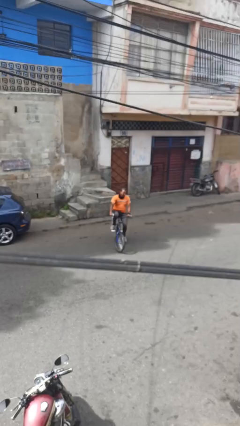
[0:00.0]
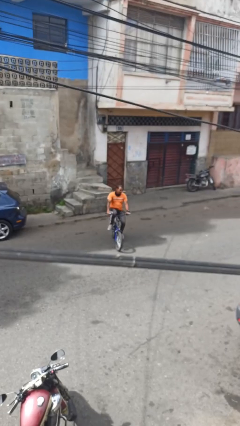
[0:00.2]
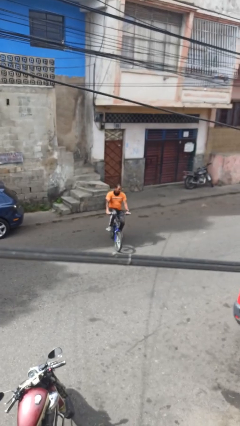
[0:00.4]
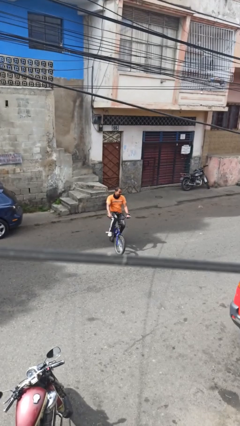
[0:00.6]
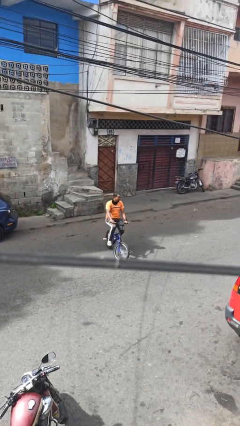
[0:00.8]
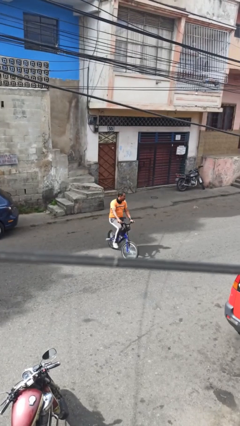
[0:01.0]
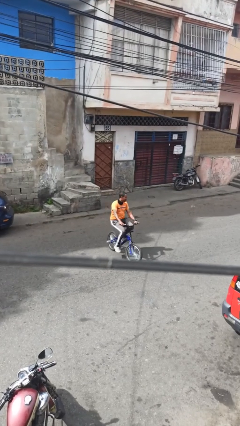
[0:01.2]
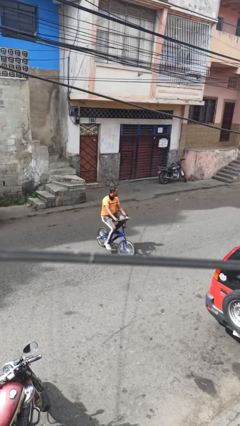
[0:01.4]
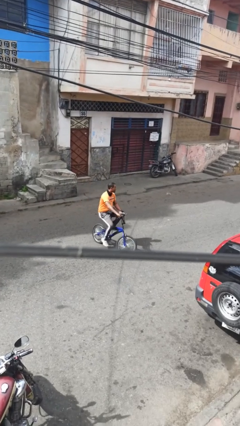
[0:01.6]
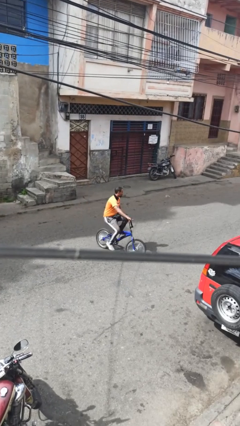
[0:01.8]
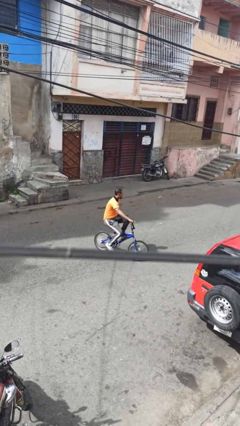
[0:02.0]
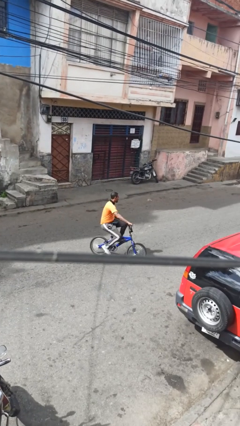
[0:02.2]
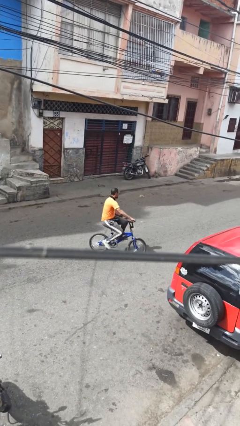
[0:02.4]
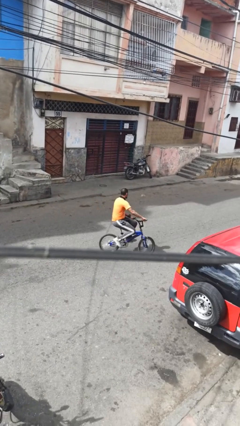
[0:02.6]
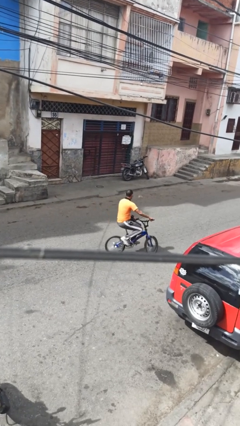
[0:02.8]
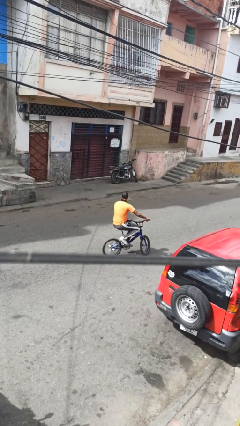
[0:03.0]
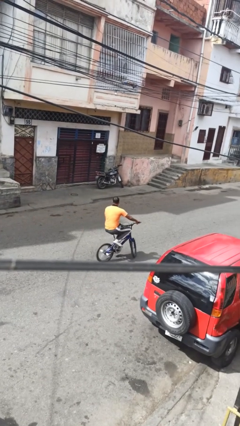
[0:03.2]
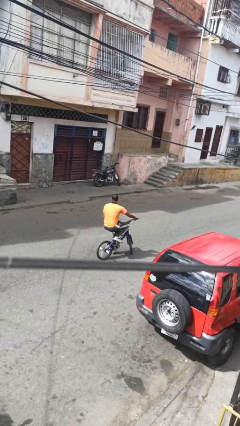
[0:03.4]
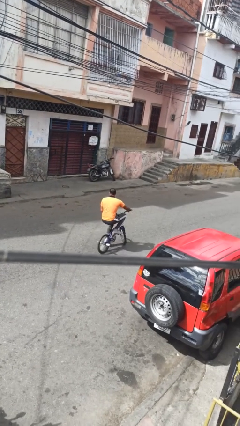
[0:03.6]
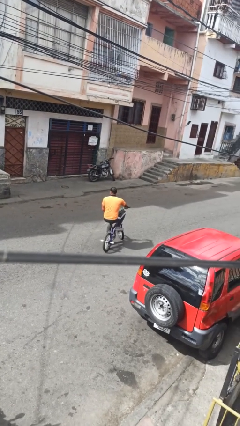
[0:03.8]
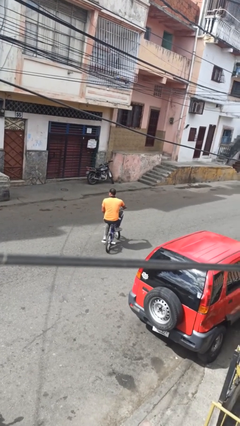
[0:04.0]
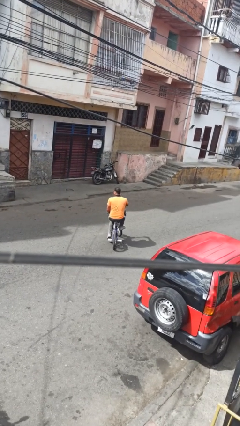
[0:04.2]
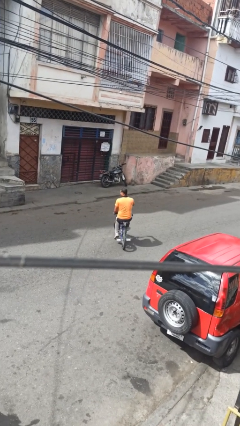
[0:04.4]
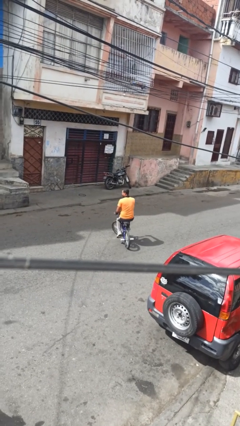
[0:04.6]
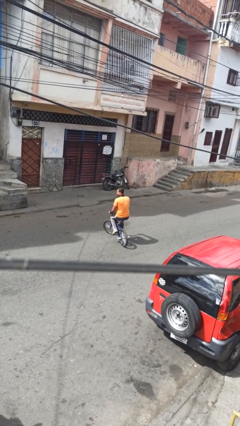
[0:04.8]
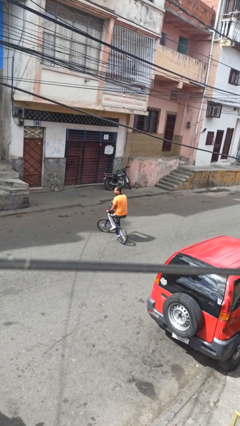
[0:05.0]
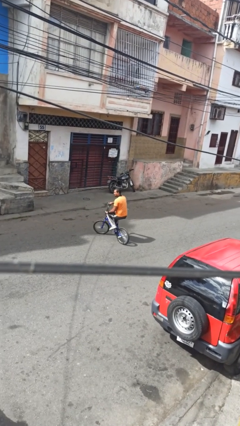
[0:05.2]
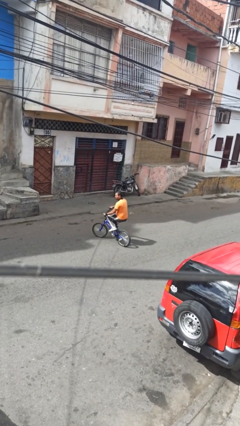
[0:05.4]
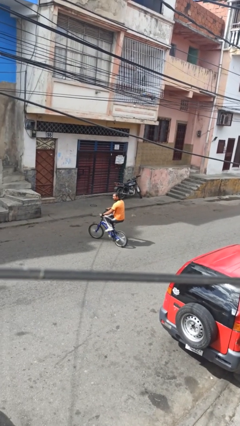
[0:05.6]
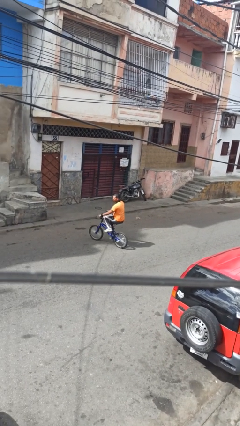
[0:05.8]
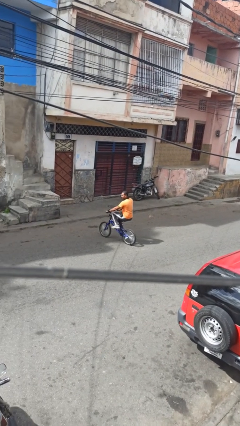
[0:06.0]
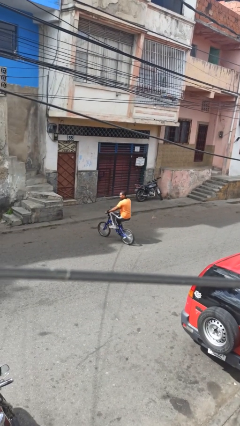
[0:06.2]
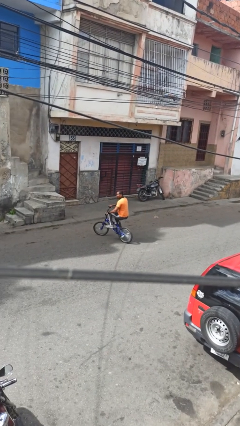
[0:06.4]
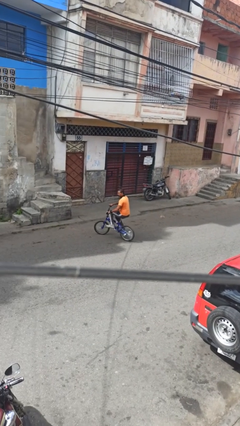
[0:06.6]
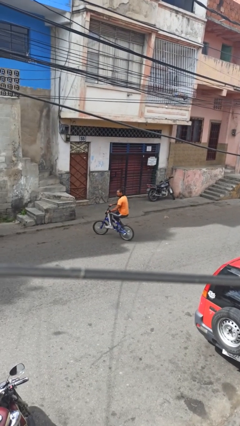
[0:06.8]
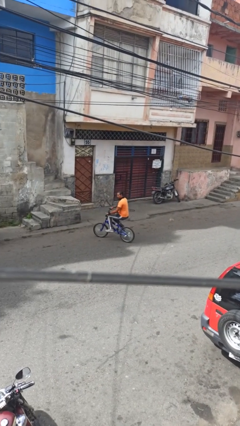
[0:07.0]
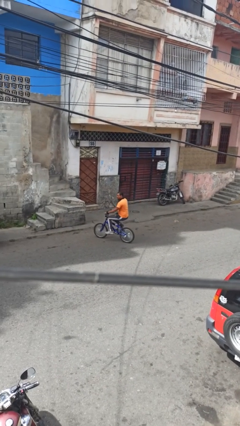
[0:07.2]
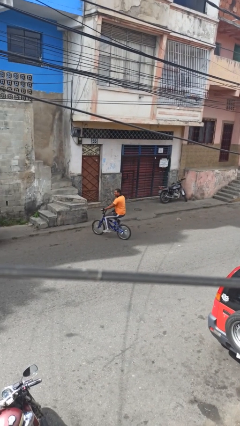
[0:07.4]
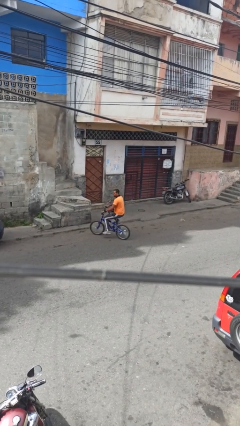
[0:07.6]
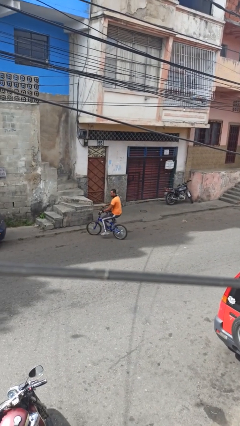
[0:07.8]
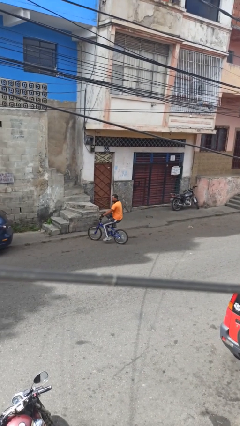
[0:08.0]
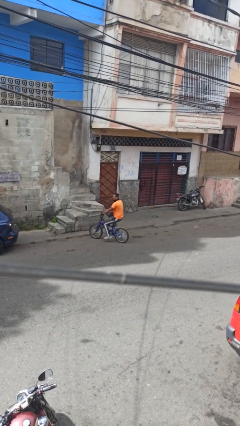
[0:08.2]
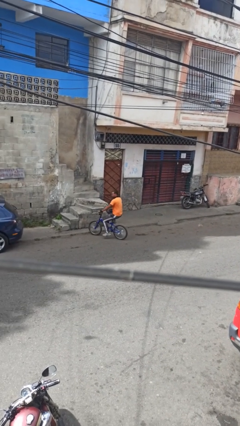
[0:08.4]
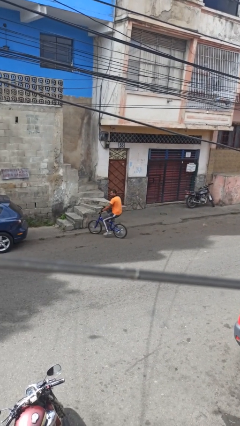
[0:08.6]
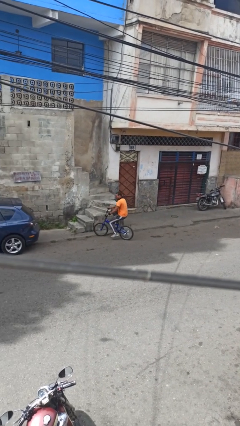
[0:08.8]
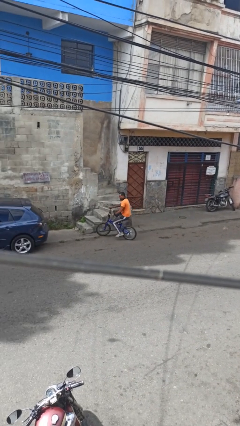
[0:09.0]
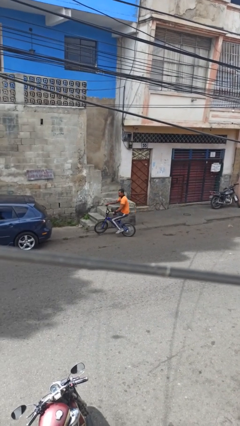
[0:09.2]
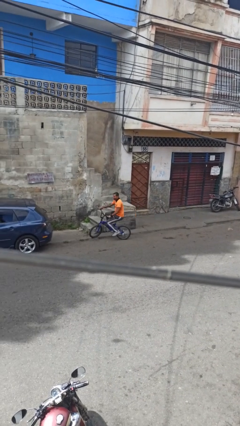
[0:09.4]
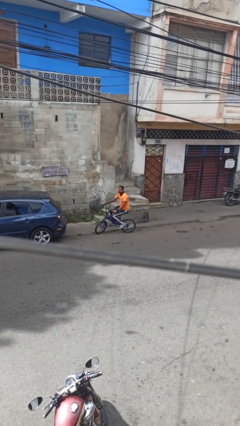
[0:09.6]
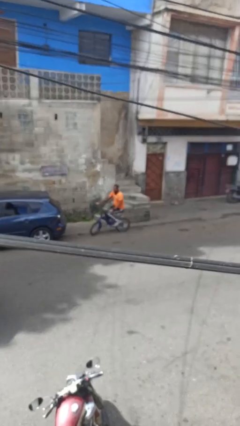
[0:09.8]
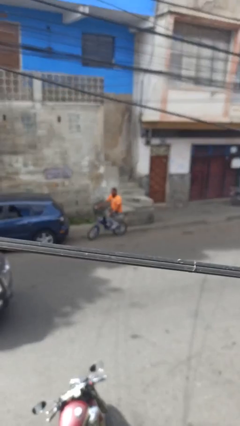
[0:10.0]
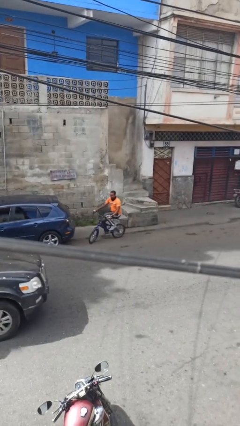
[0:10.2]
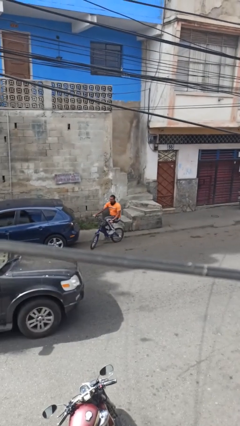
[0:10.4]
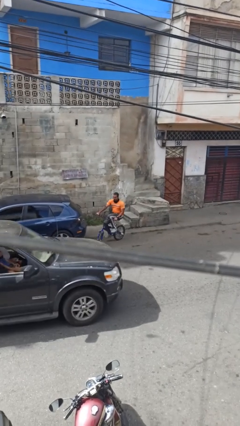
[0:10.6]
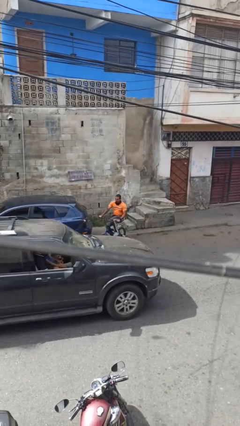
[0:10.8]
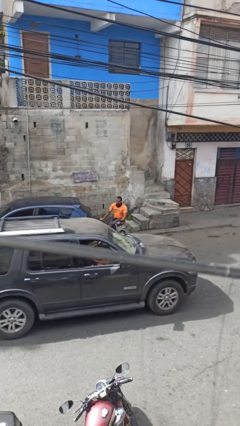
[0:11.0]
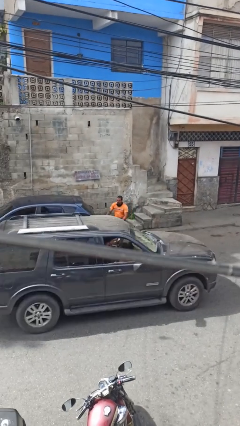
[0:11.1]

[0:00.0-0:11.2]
person rides bicycle

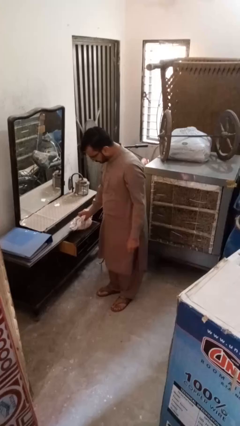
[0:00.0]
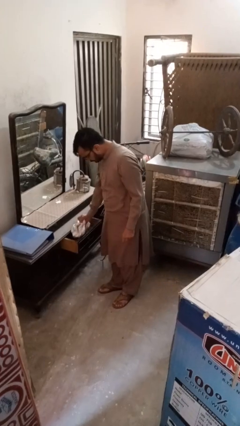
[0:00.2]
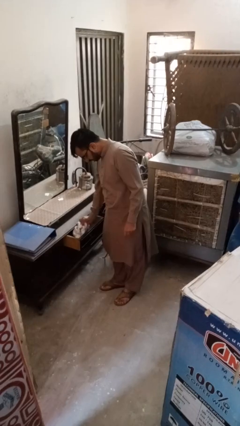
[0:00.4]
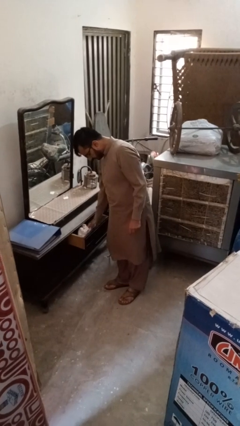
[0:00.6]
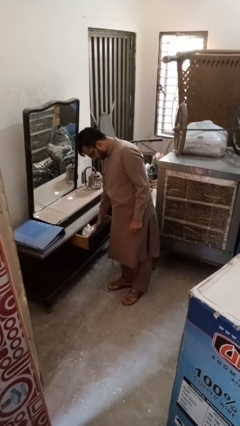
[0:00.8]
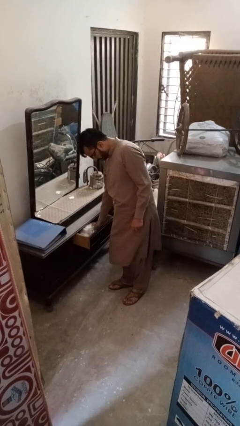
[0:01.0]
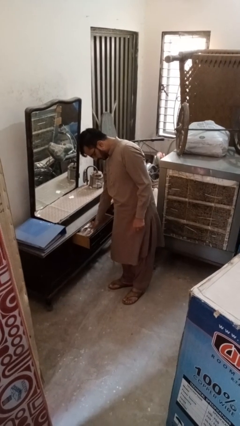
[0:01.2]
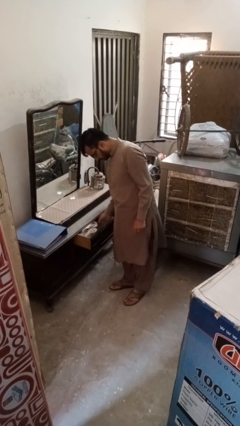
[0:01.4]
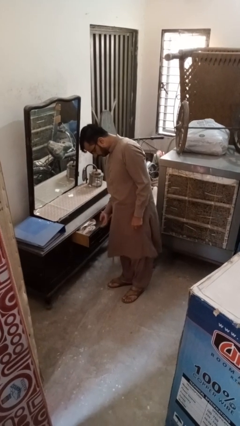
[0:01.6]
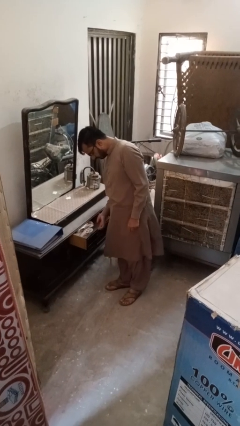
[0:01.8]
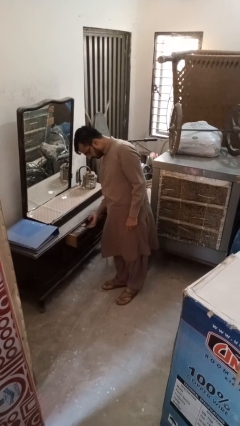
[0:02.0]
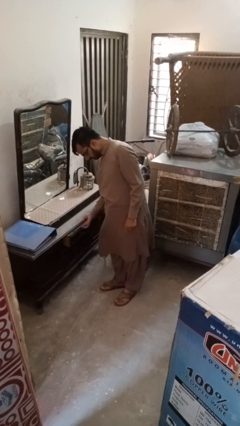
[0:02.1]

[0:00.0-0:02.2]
person puts clothes into dresser

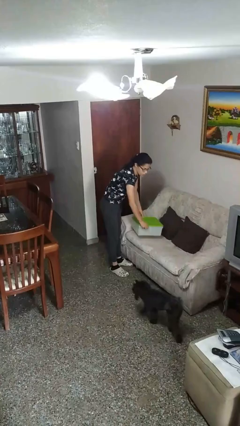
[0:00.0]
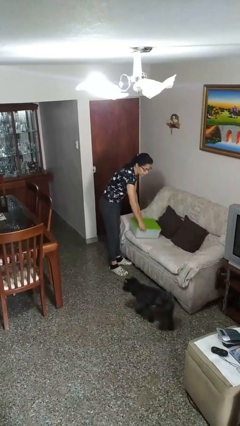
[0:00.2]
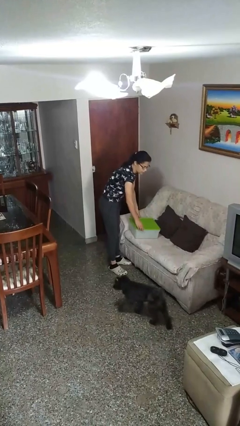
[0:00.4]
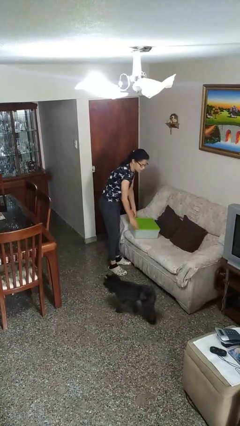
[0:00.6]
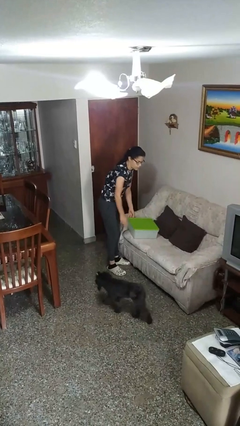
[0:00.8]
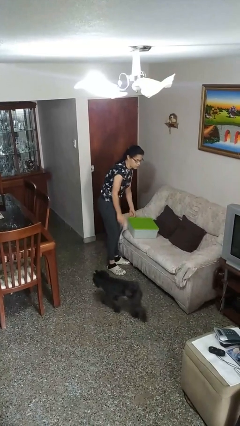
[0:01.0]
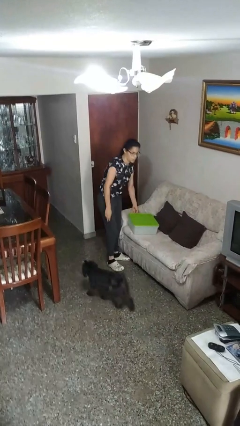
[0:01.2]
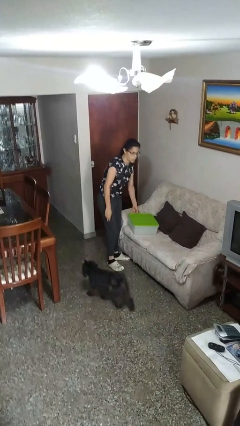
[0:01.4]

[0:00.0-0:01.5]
person puts down object on couch

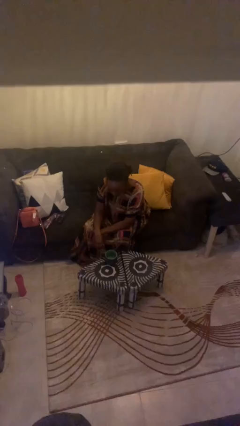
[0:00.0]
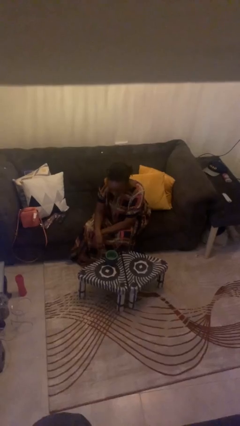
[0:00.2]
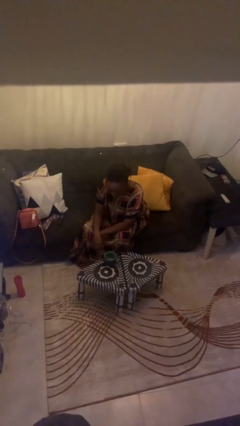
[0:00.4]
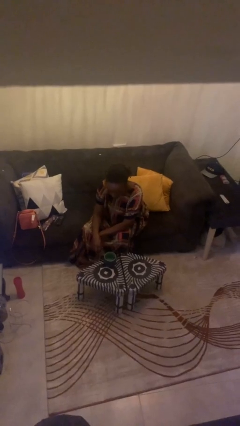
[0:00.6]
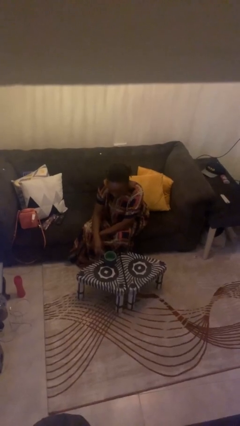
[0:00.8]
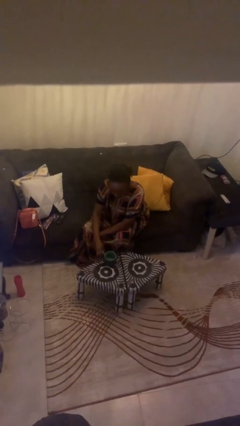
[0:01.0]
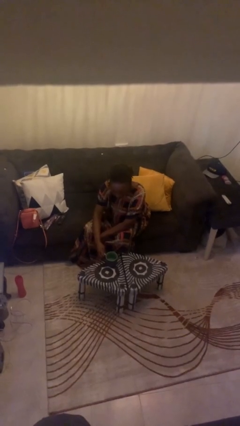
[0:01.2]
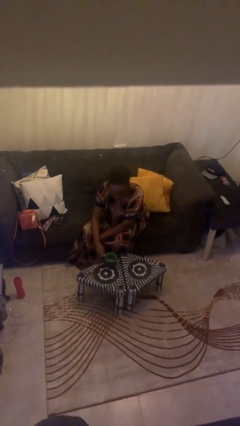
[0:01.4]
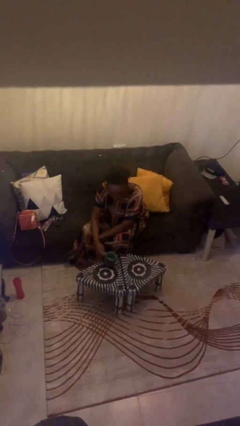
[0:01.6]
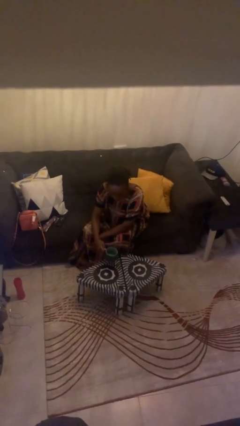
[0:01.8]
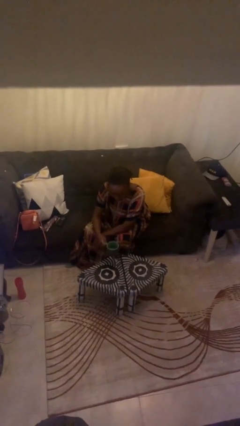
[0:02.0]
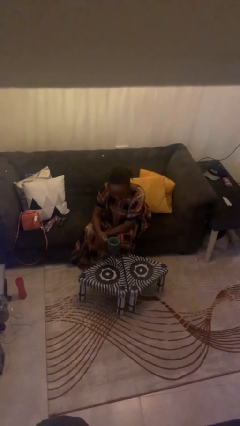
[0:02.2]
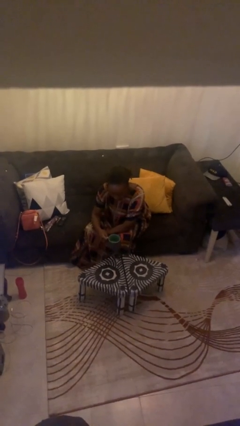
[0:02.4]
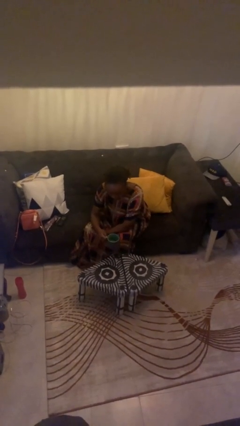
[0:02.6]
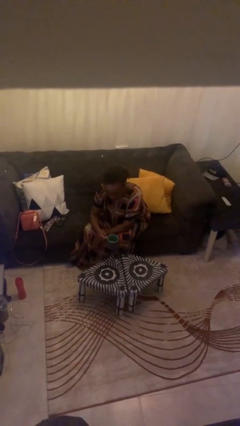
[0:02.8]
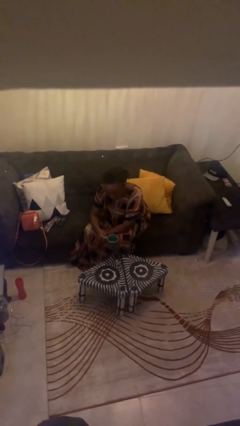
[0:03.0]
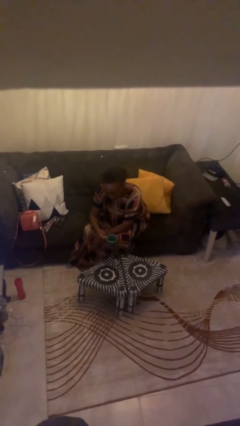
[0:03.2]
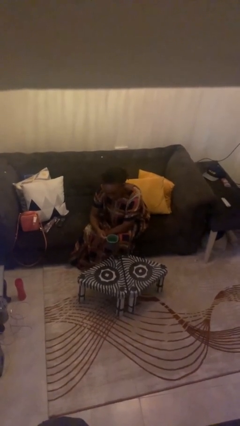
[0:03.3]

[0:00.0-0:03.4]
person picks up object from table
